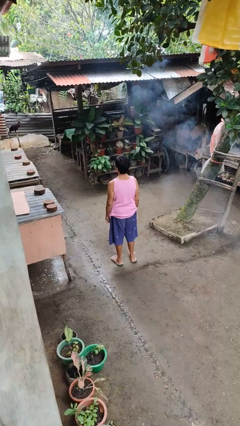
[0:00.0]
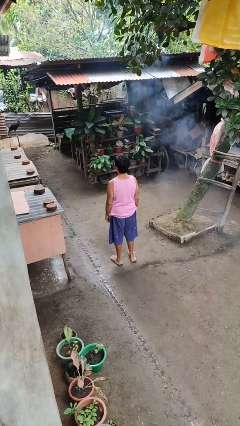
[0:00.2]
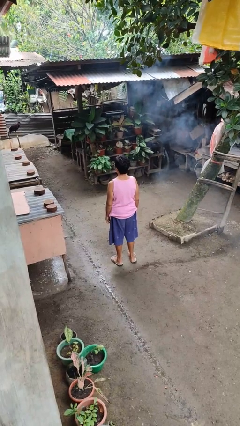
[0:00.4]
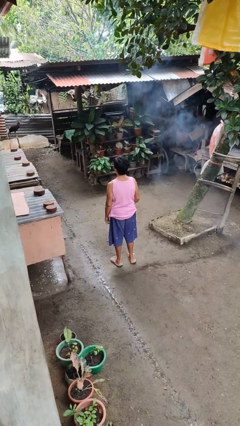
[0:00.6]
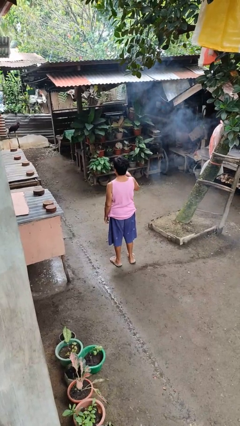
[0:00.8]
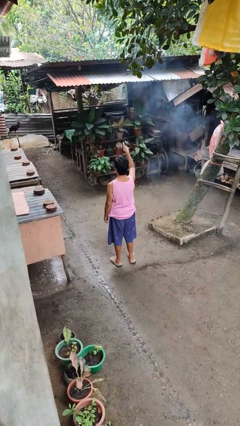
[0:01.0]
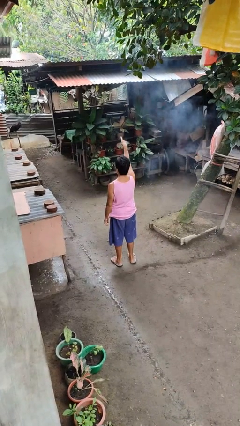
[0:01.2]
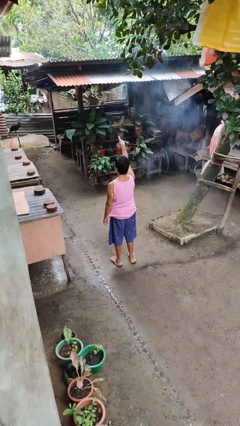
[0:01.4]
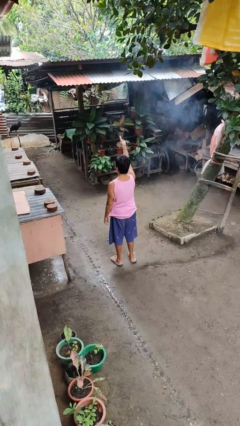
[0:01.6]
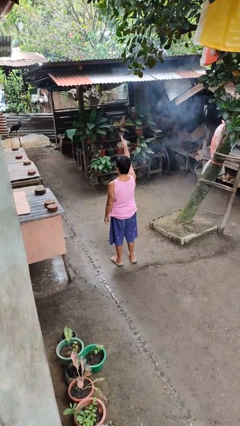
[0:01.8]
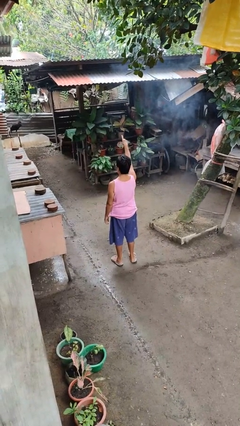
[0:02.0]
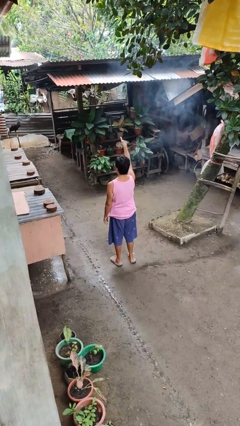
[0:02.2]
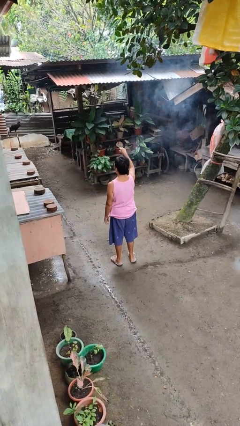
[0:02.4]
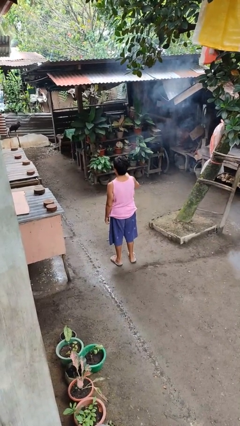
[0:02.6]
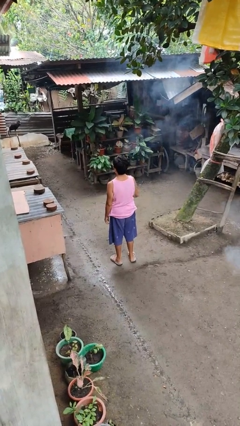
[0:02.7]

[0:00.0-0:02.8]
person points at person

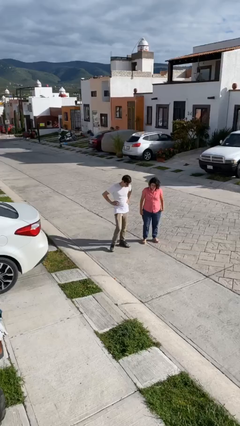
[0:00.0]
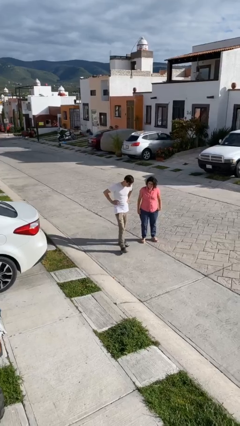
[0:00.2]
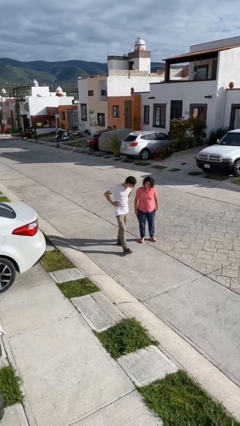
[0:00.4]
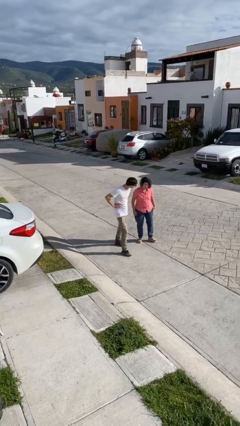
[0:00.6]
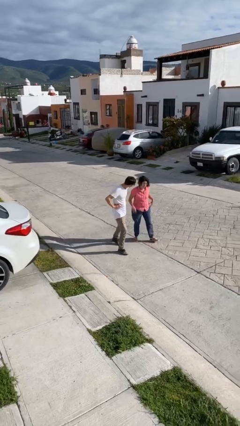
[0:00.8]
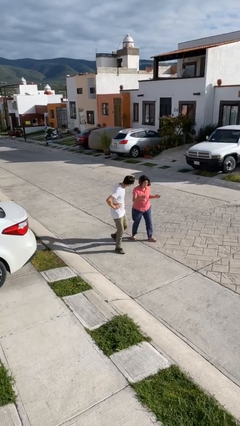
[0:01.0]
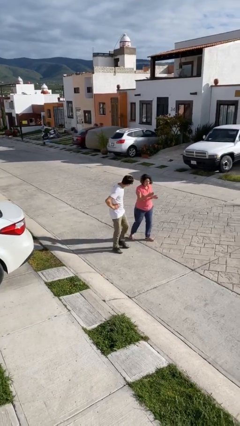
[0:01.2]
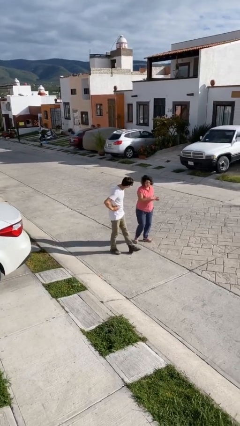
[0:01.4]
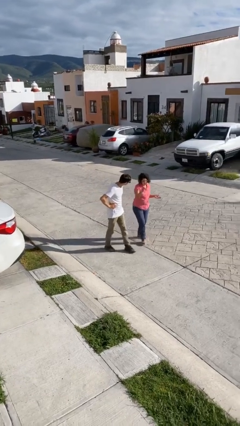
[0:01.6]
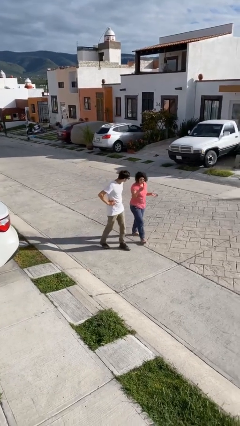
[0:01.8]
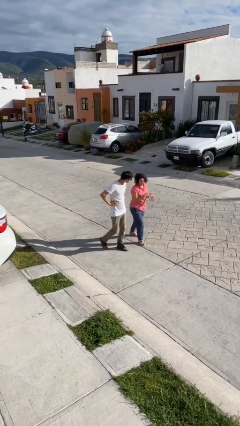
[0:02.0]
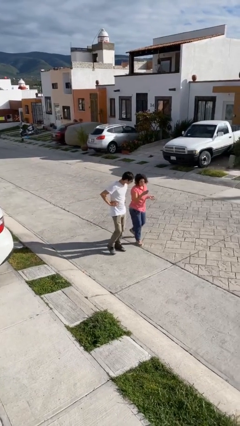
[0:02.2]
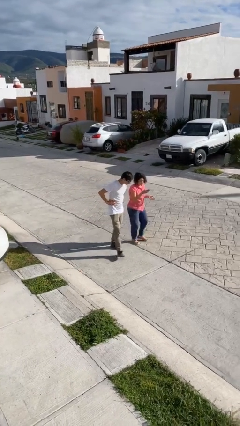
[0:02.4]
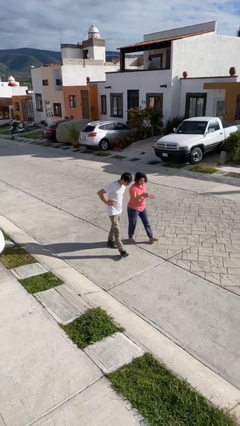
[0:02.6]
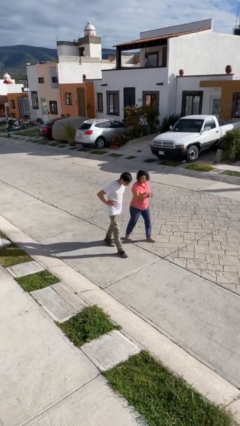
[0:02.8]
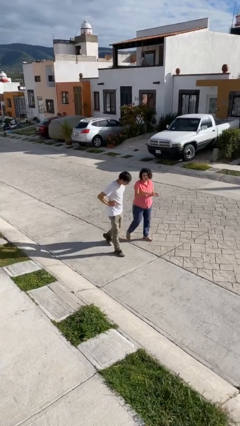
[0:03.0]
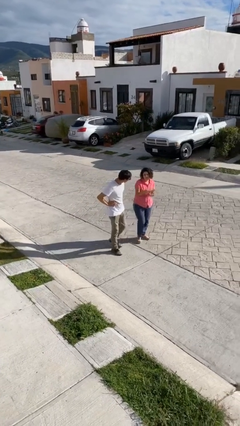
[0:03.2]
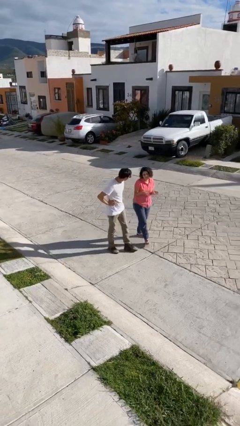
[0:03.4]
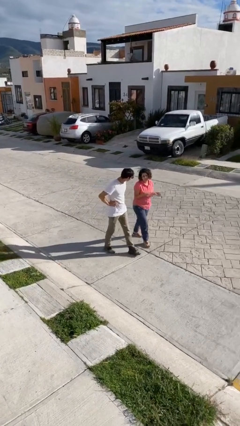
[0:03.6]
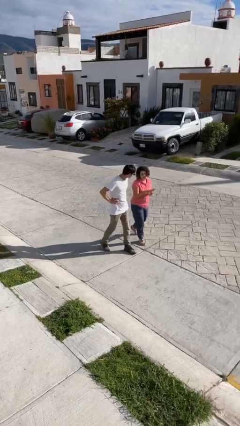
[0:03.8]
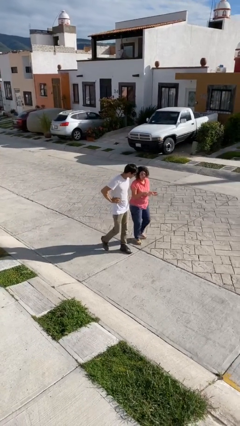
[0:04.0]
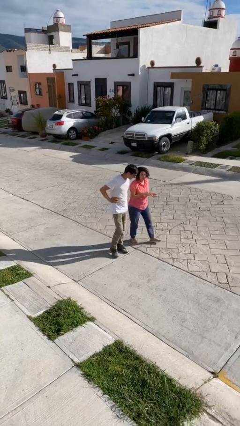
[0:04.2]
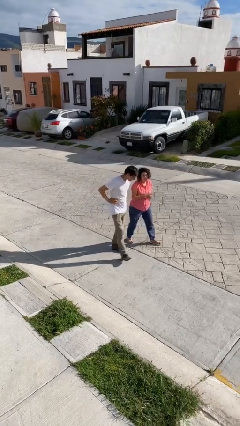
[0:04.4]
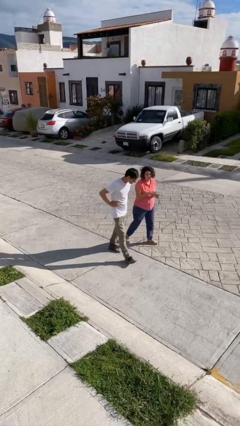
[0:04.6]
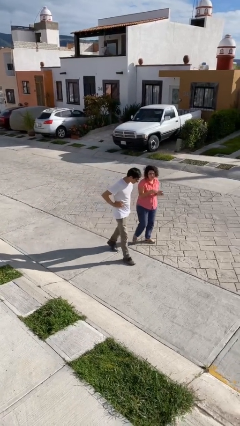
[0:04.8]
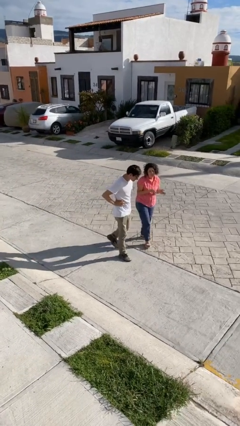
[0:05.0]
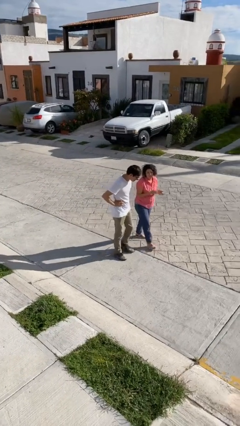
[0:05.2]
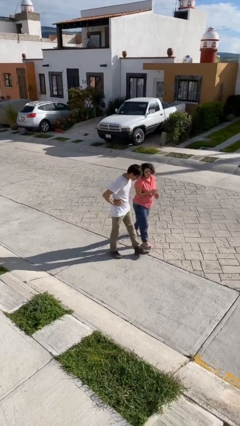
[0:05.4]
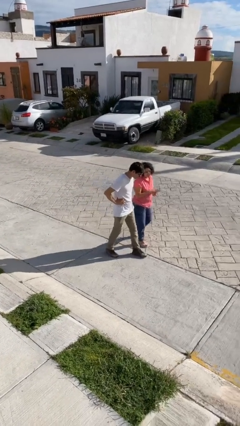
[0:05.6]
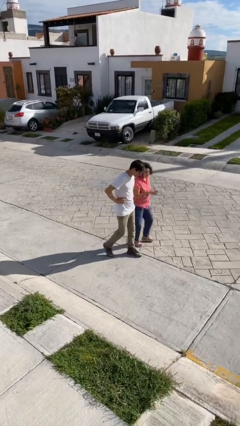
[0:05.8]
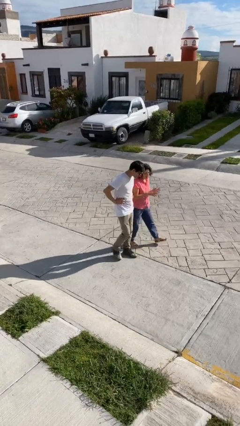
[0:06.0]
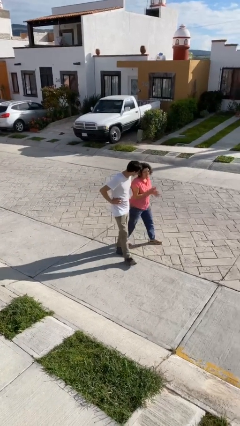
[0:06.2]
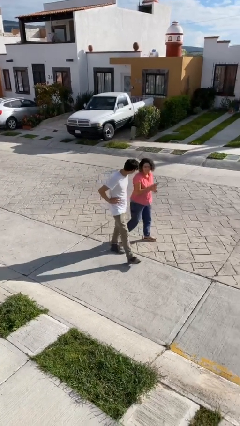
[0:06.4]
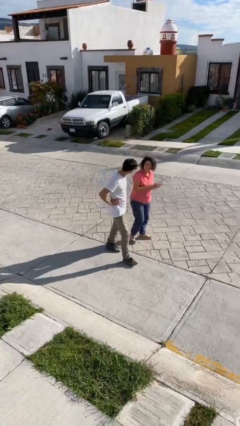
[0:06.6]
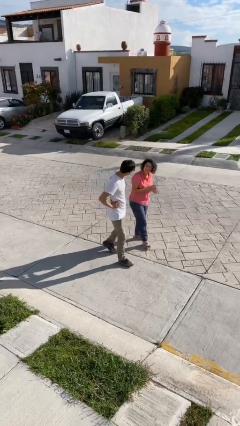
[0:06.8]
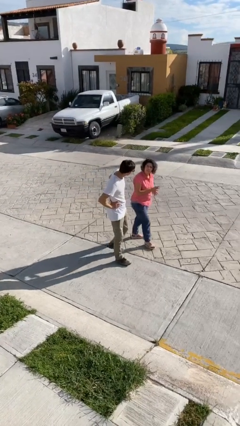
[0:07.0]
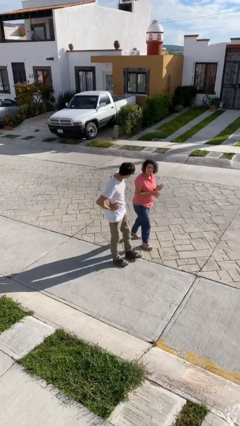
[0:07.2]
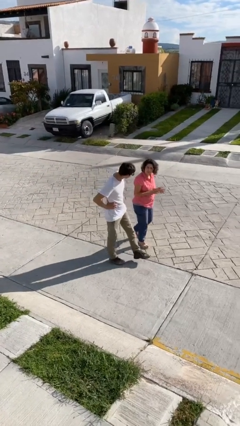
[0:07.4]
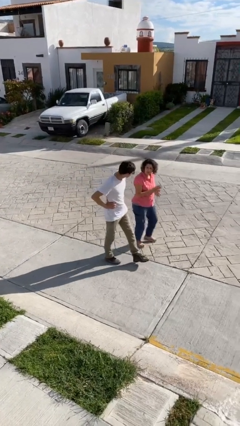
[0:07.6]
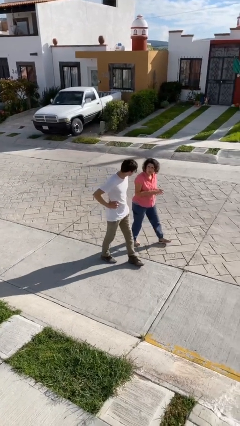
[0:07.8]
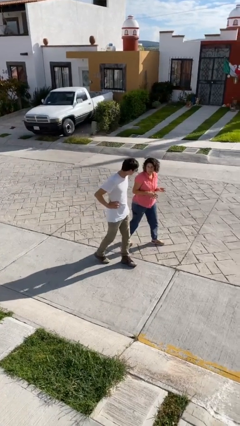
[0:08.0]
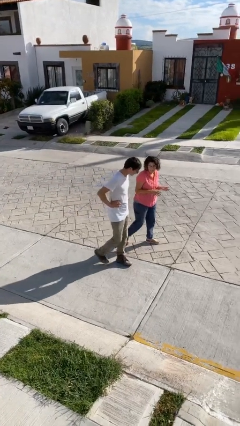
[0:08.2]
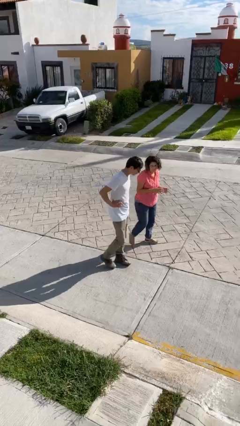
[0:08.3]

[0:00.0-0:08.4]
person talks to person

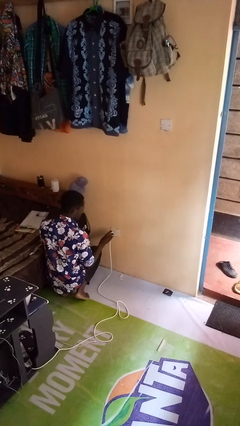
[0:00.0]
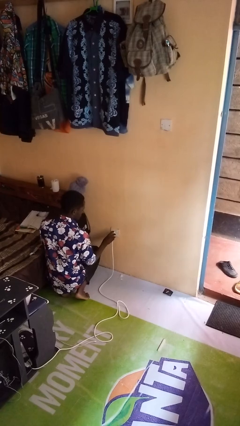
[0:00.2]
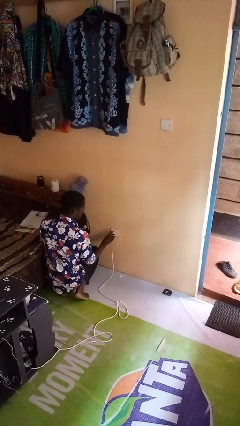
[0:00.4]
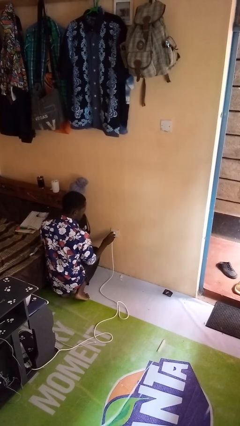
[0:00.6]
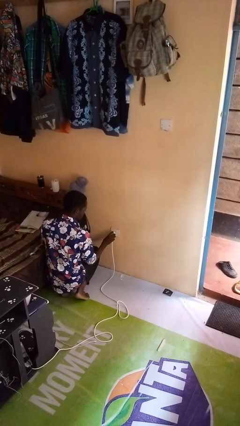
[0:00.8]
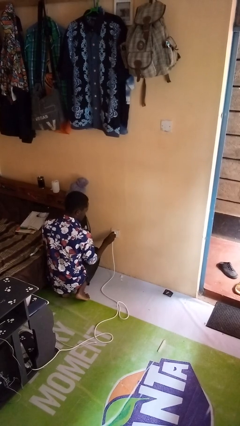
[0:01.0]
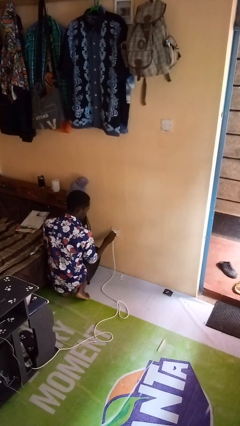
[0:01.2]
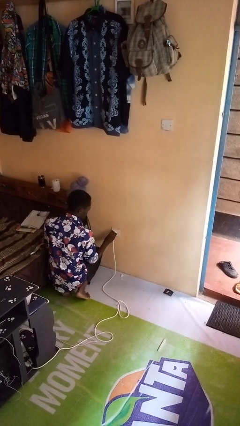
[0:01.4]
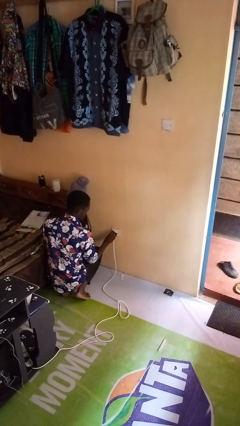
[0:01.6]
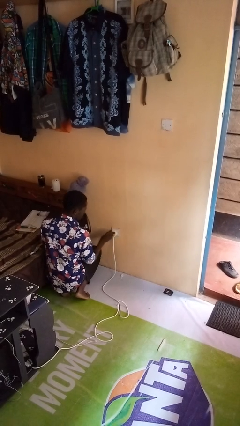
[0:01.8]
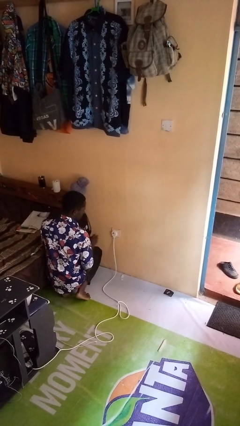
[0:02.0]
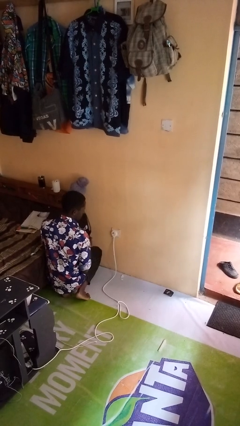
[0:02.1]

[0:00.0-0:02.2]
person plugs into electrical socket

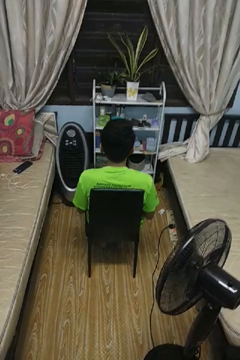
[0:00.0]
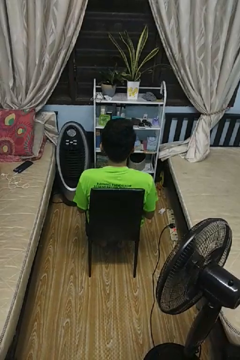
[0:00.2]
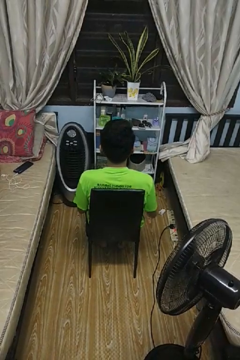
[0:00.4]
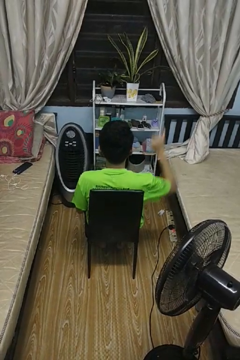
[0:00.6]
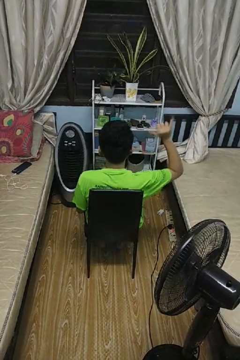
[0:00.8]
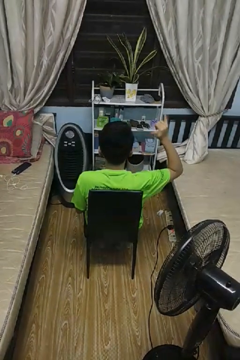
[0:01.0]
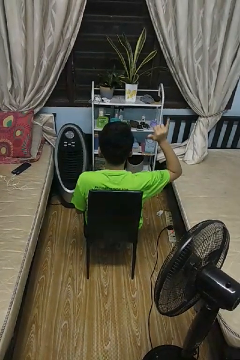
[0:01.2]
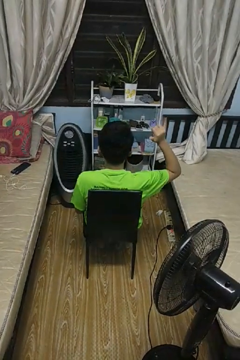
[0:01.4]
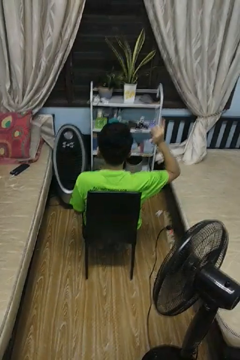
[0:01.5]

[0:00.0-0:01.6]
person gestures hang loose

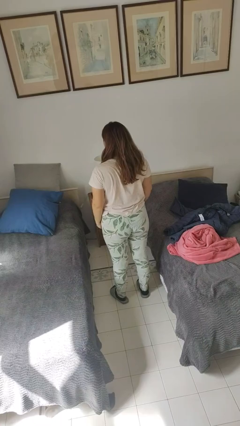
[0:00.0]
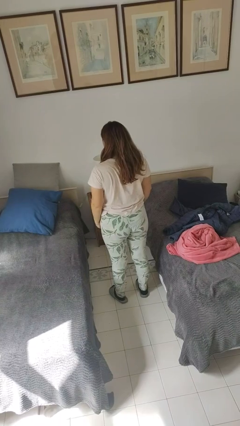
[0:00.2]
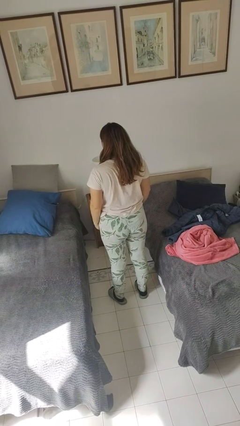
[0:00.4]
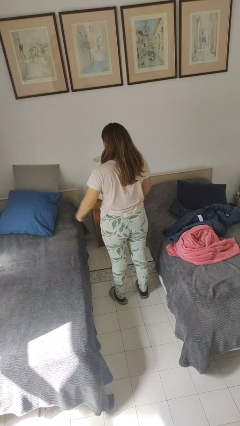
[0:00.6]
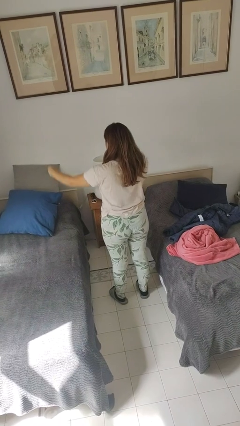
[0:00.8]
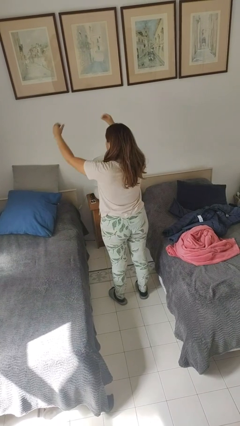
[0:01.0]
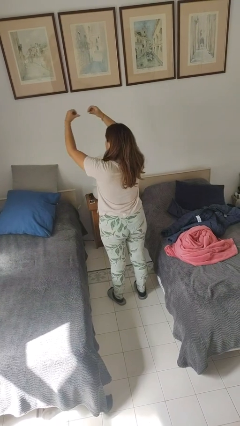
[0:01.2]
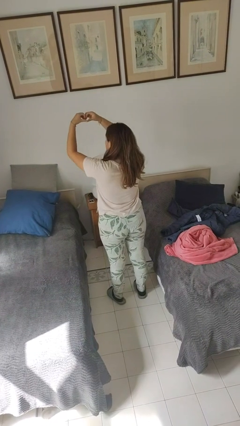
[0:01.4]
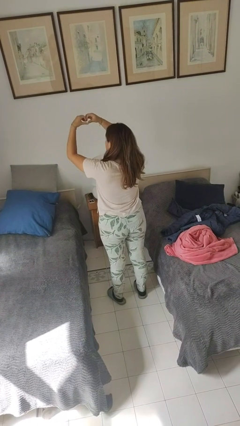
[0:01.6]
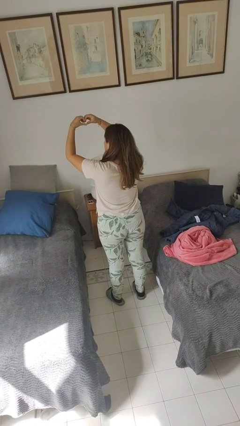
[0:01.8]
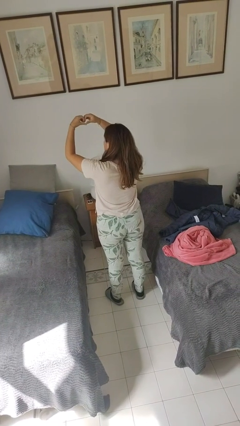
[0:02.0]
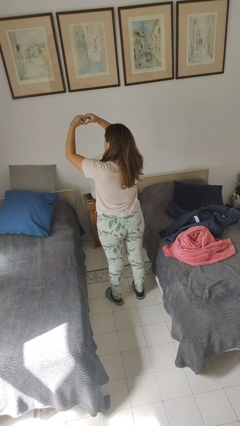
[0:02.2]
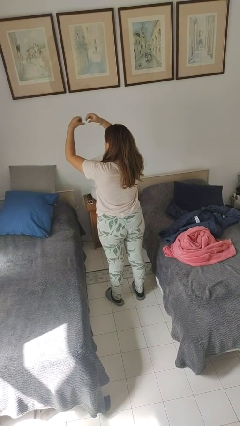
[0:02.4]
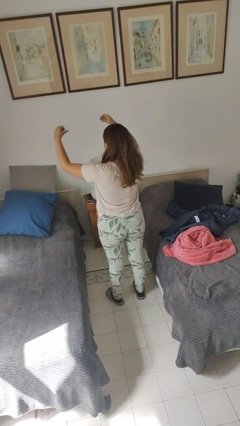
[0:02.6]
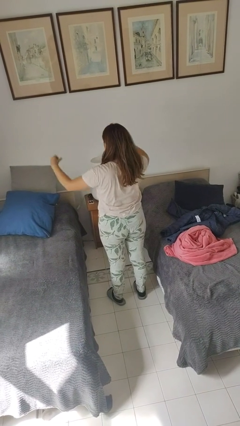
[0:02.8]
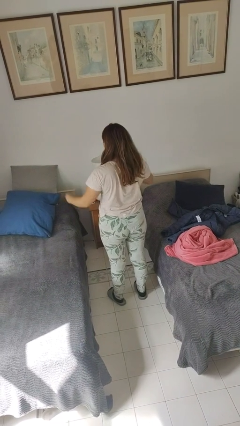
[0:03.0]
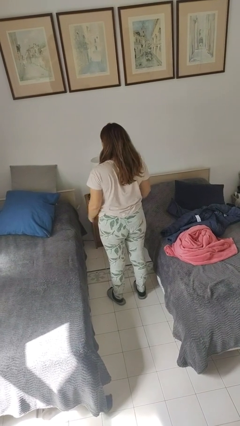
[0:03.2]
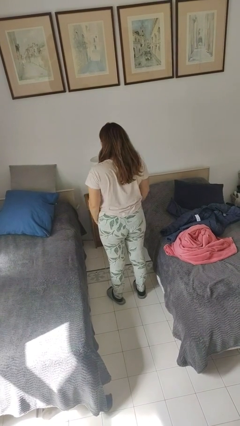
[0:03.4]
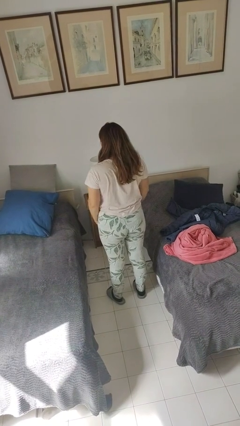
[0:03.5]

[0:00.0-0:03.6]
person gestures heart
